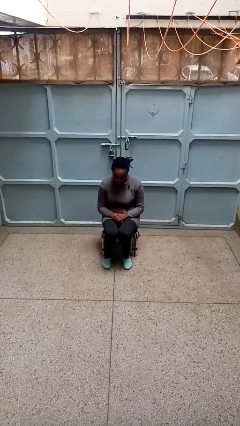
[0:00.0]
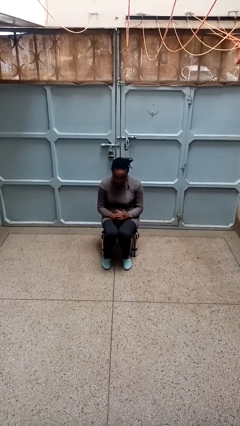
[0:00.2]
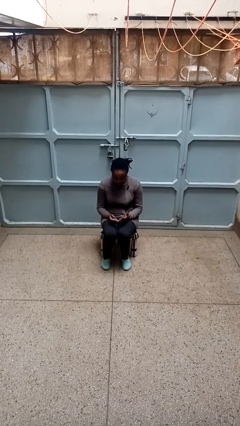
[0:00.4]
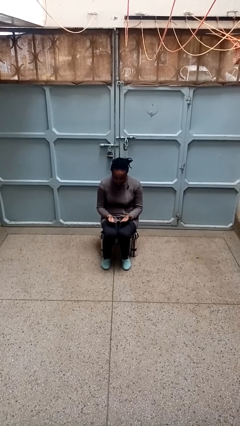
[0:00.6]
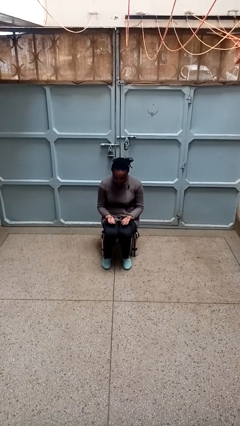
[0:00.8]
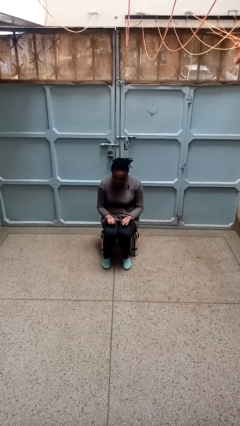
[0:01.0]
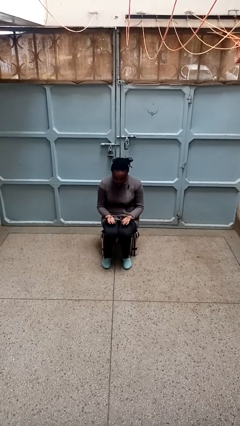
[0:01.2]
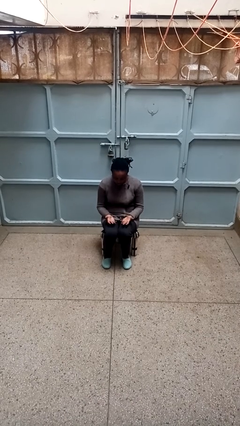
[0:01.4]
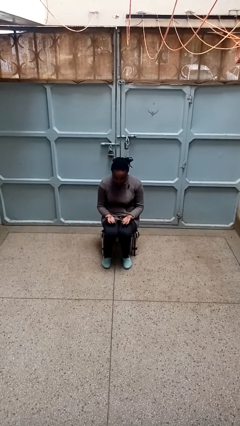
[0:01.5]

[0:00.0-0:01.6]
person looks at hands in lap

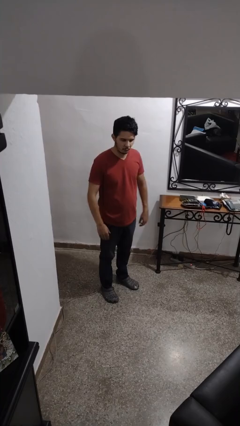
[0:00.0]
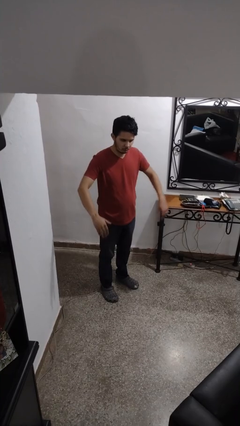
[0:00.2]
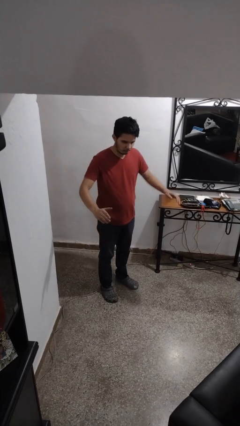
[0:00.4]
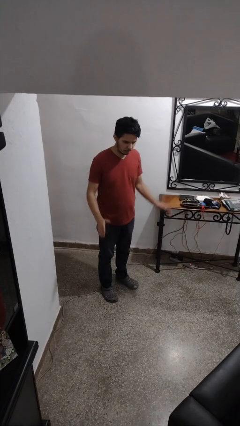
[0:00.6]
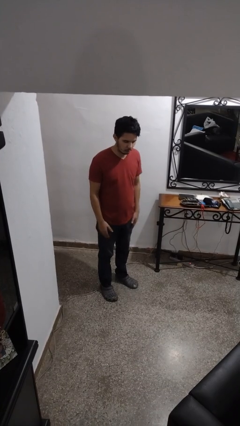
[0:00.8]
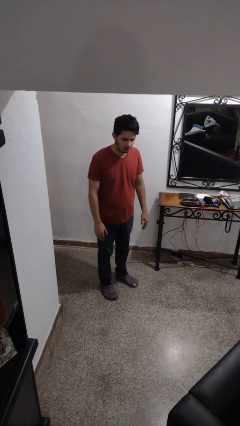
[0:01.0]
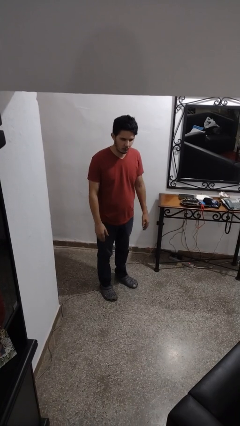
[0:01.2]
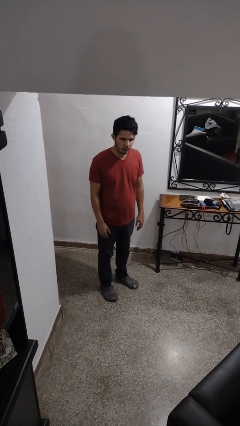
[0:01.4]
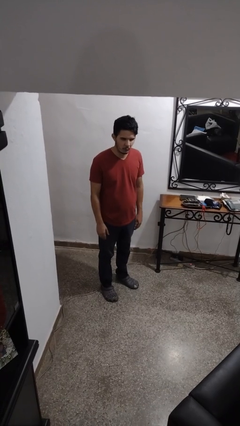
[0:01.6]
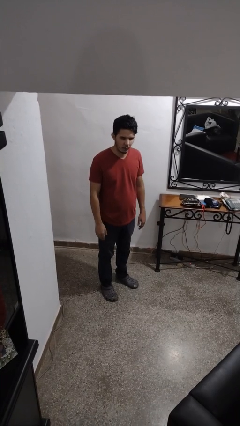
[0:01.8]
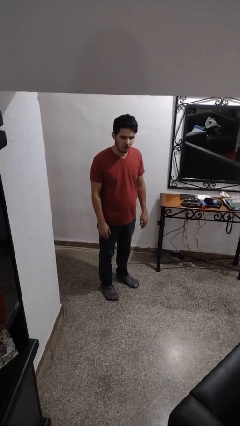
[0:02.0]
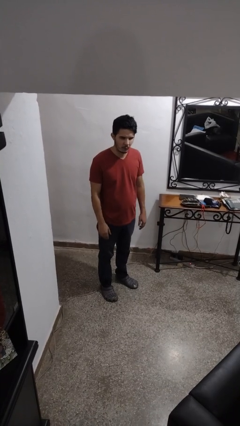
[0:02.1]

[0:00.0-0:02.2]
person slaps hands on thighs

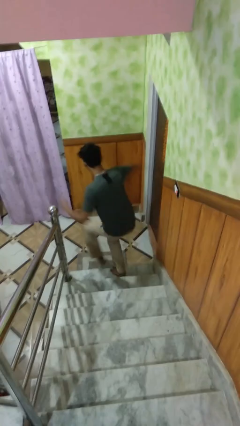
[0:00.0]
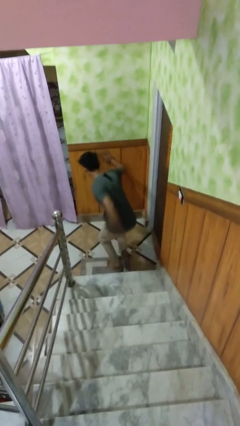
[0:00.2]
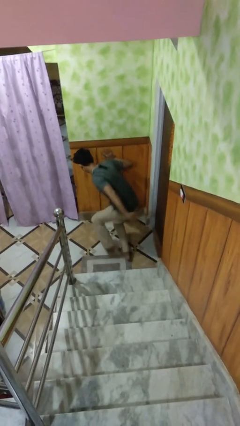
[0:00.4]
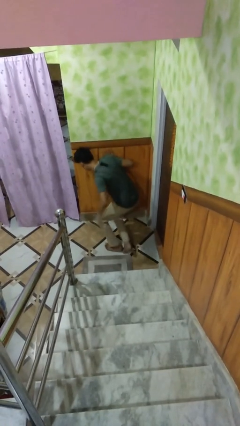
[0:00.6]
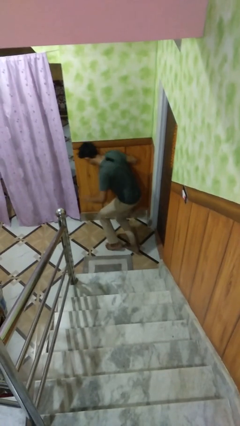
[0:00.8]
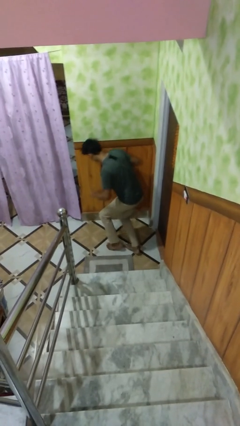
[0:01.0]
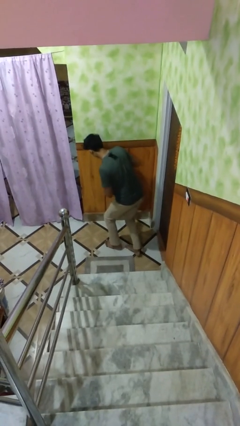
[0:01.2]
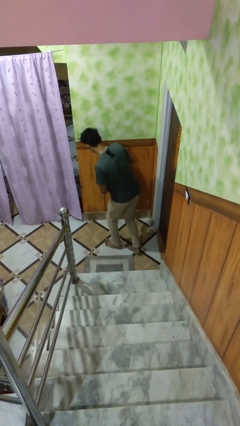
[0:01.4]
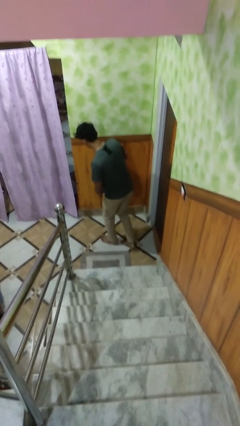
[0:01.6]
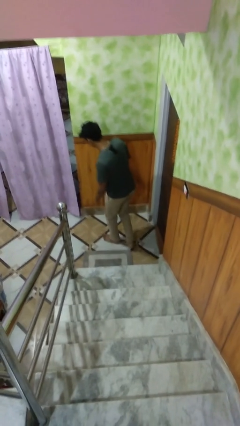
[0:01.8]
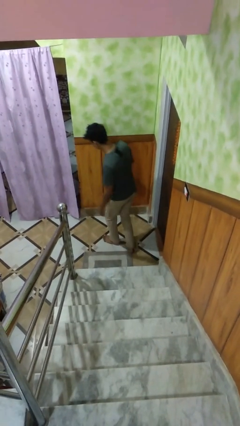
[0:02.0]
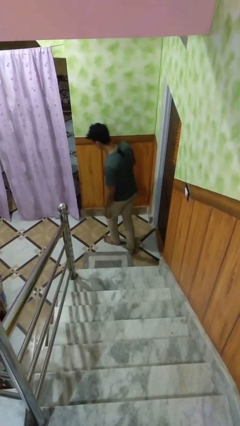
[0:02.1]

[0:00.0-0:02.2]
person trips on stair

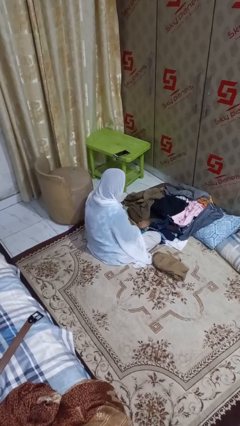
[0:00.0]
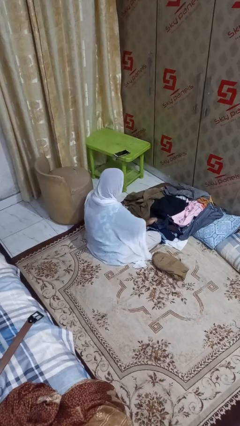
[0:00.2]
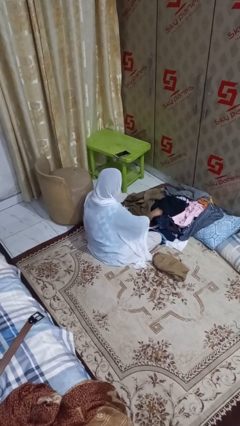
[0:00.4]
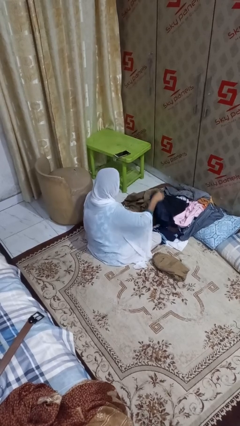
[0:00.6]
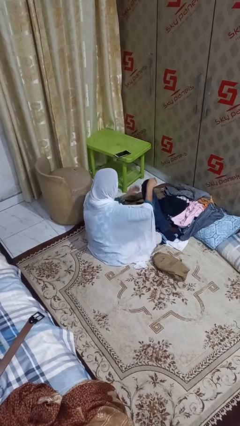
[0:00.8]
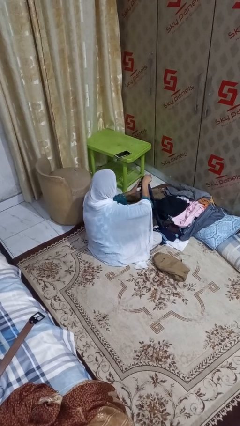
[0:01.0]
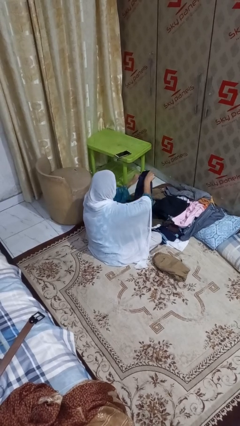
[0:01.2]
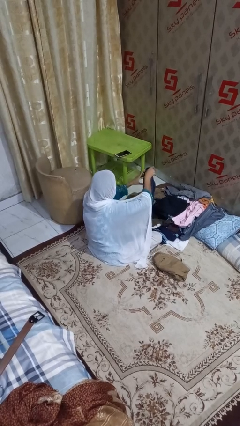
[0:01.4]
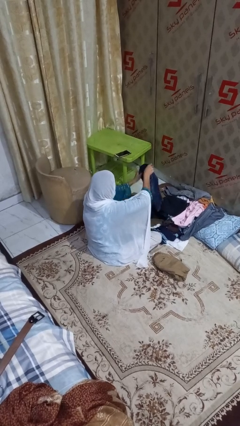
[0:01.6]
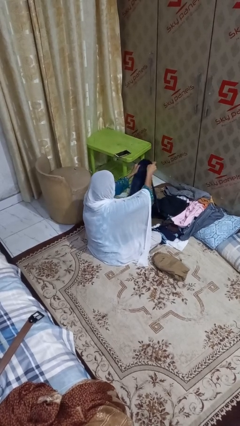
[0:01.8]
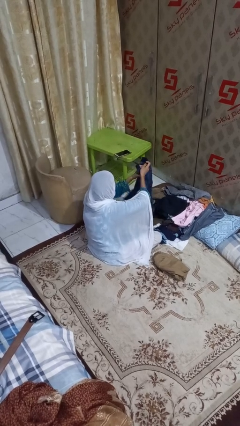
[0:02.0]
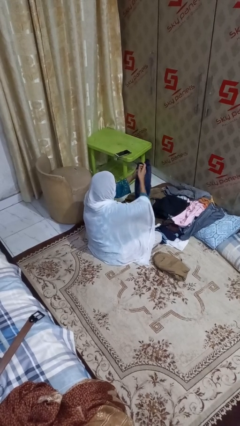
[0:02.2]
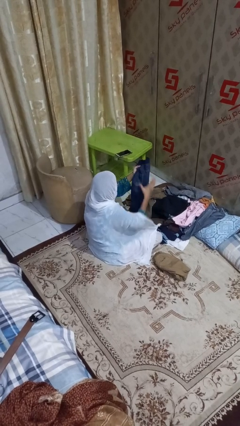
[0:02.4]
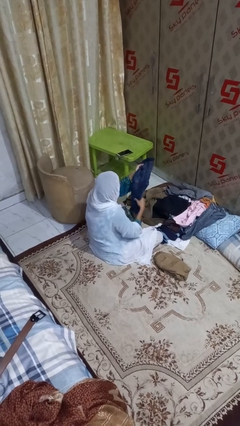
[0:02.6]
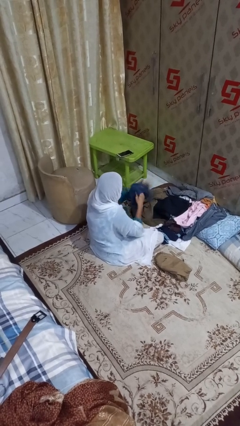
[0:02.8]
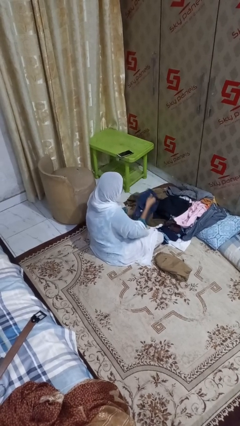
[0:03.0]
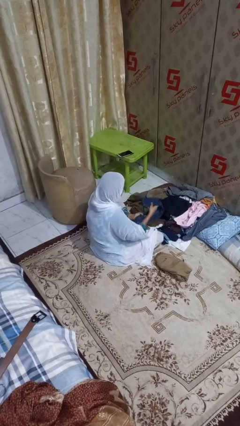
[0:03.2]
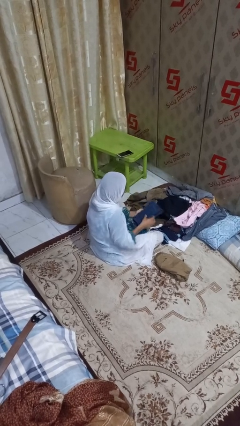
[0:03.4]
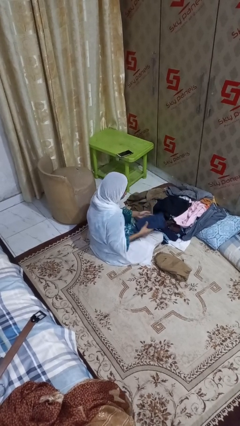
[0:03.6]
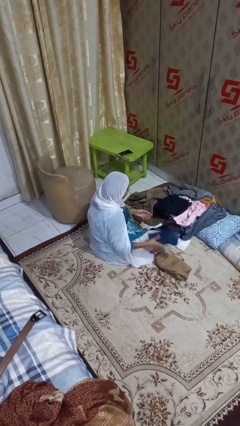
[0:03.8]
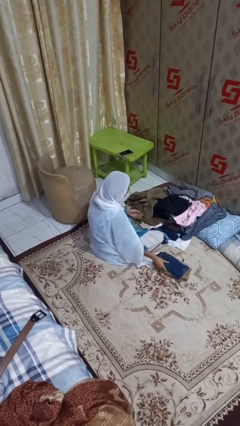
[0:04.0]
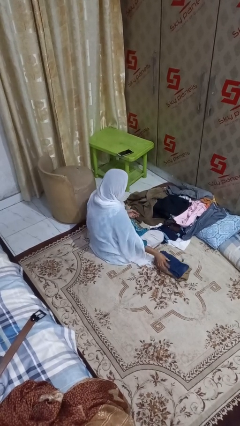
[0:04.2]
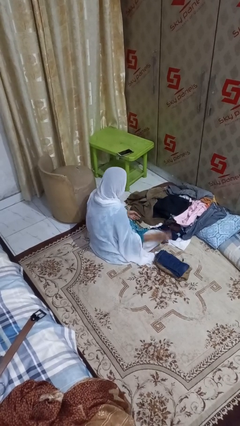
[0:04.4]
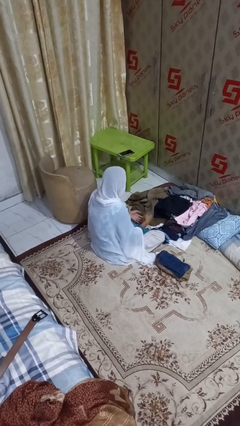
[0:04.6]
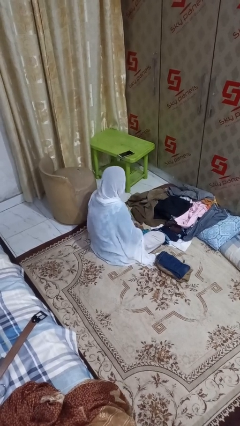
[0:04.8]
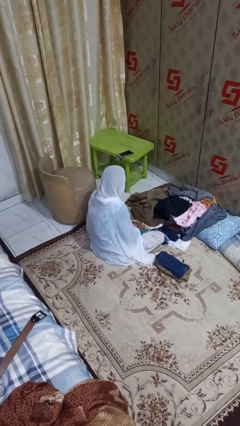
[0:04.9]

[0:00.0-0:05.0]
person folds pants

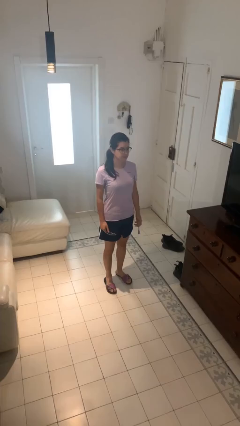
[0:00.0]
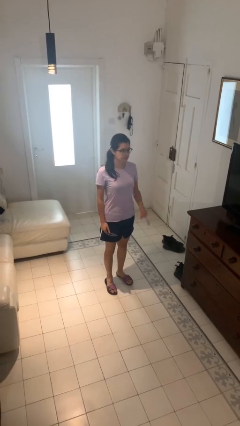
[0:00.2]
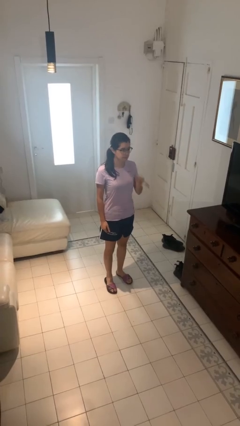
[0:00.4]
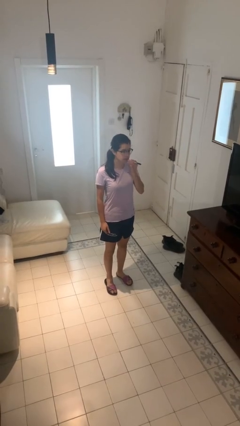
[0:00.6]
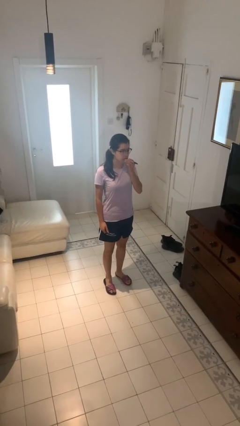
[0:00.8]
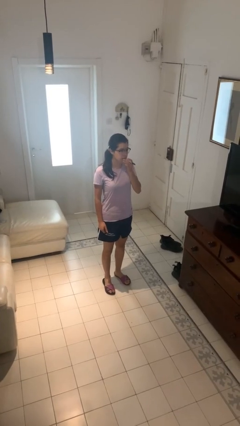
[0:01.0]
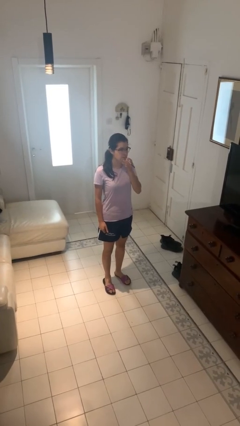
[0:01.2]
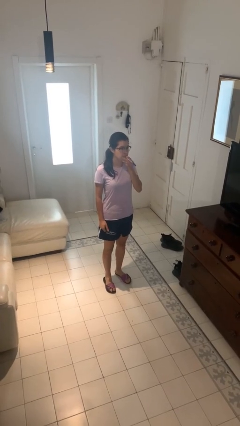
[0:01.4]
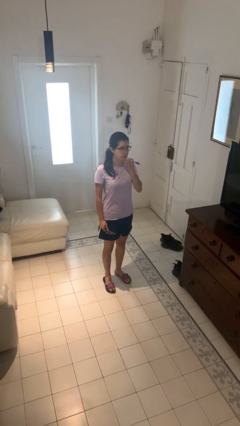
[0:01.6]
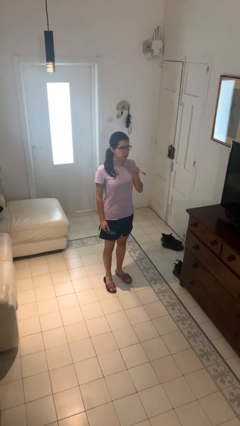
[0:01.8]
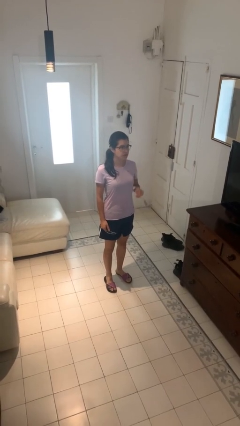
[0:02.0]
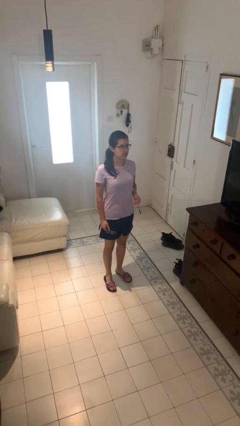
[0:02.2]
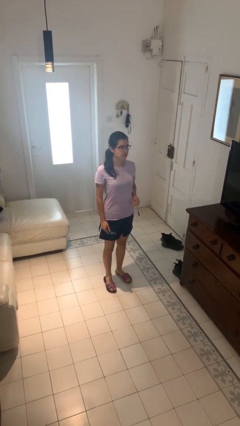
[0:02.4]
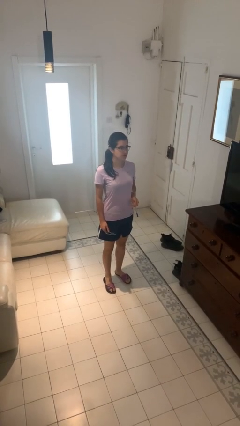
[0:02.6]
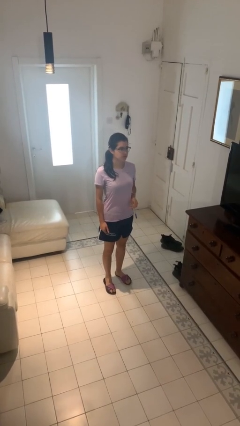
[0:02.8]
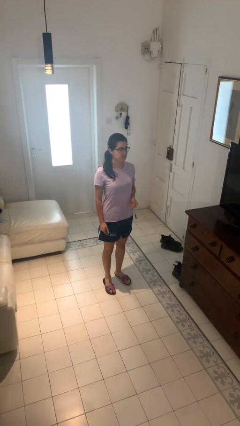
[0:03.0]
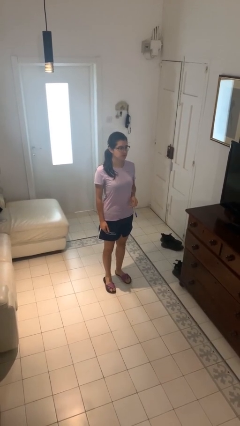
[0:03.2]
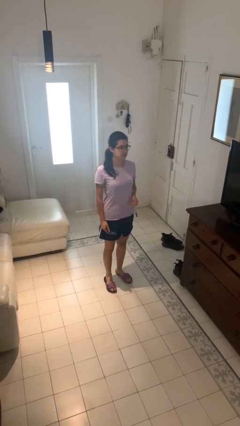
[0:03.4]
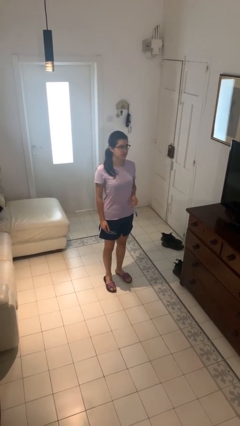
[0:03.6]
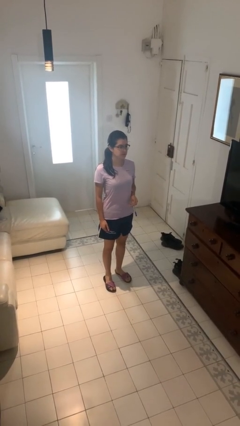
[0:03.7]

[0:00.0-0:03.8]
person vapes

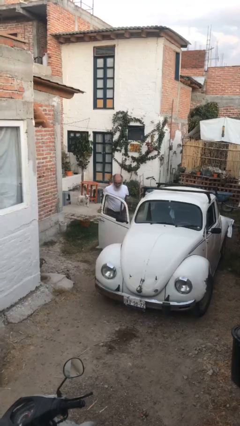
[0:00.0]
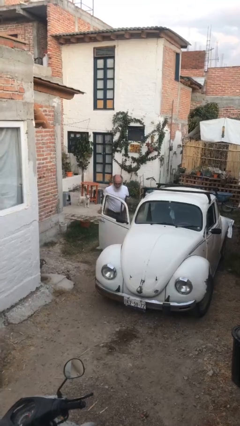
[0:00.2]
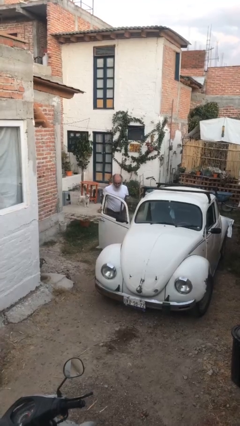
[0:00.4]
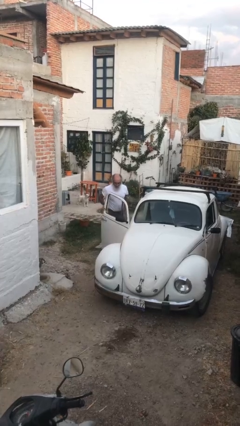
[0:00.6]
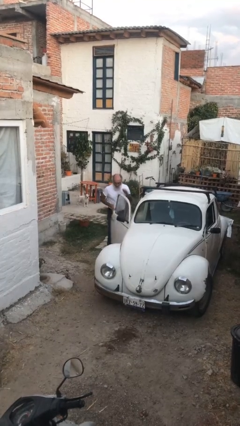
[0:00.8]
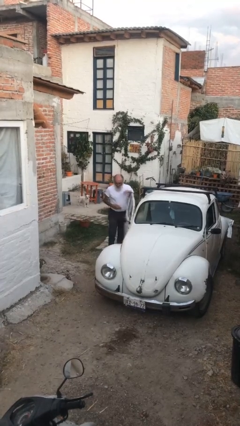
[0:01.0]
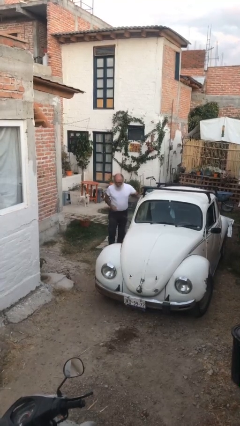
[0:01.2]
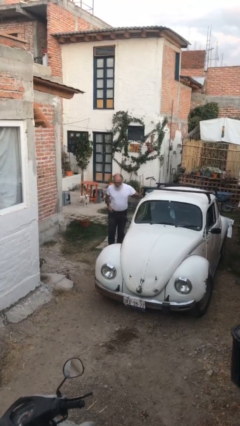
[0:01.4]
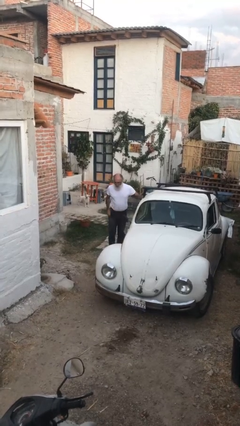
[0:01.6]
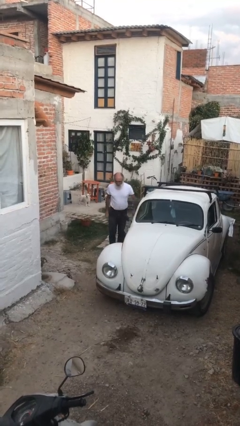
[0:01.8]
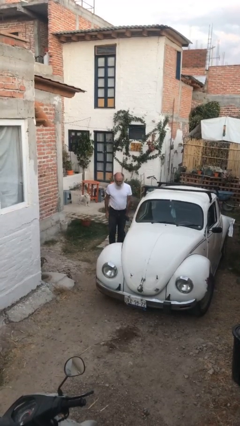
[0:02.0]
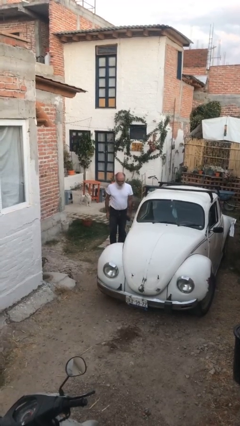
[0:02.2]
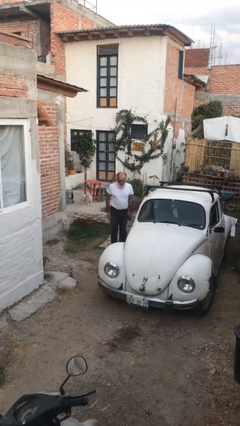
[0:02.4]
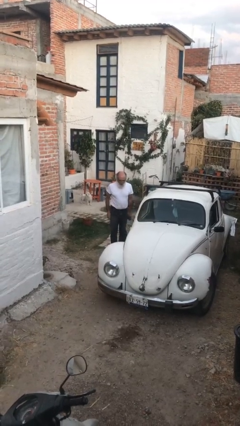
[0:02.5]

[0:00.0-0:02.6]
person closes car door
